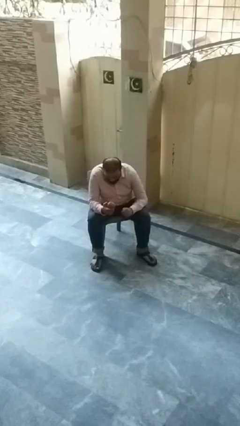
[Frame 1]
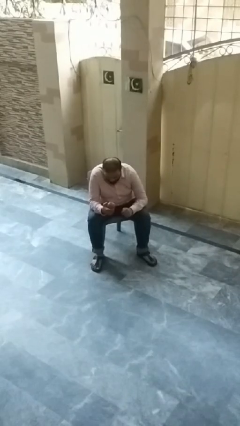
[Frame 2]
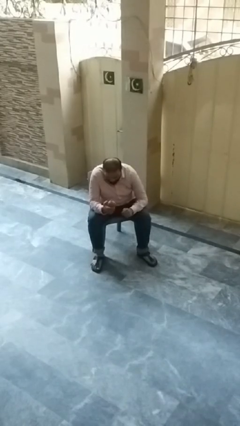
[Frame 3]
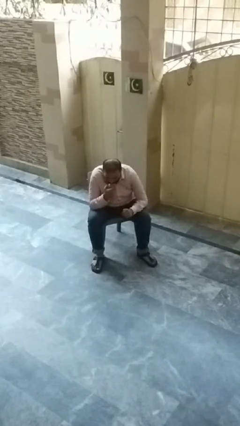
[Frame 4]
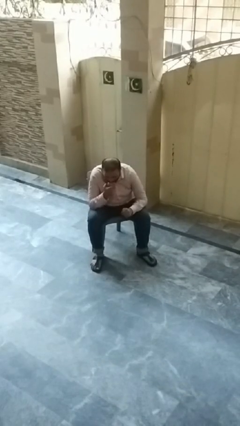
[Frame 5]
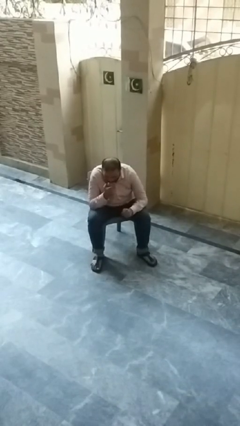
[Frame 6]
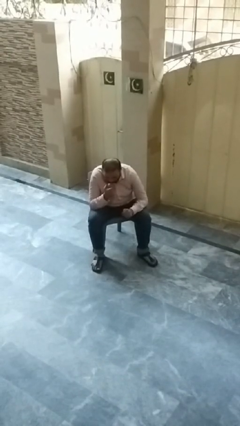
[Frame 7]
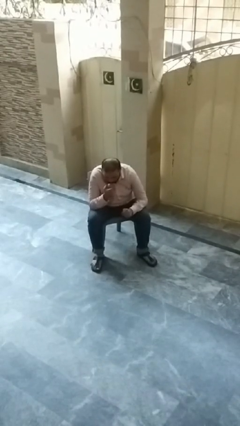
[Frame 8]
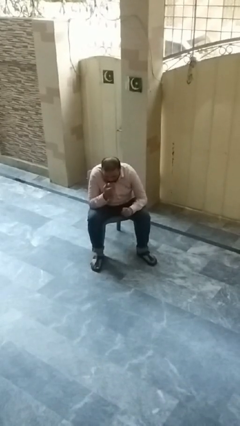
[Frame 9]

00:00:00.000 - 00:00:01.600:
person eats apple

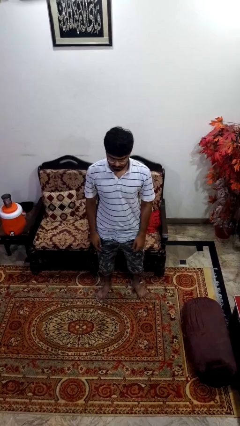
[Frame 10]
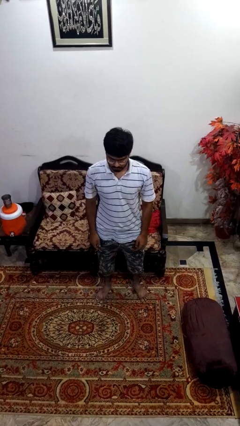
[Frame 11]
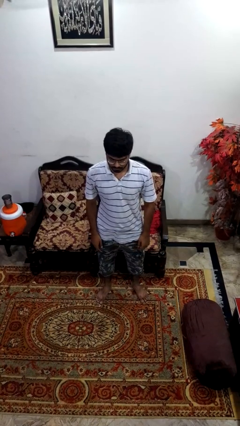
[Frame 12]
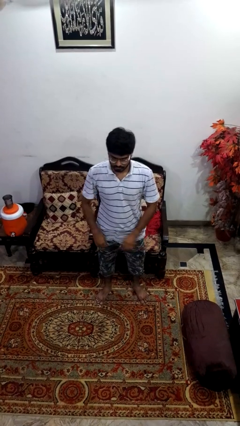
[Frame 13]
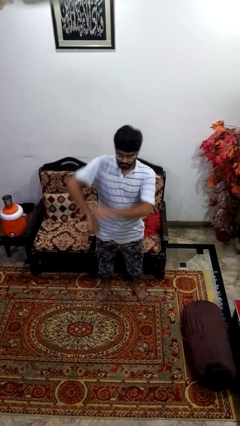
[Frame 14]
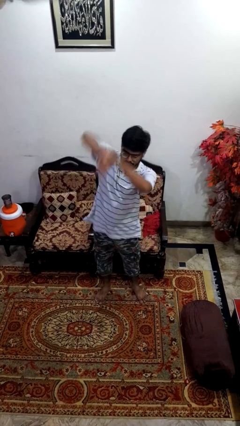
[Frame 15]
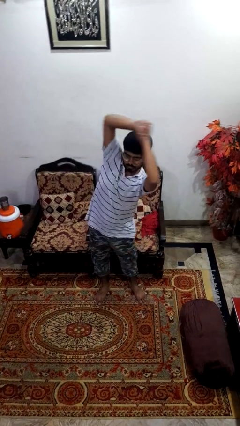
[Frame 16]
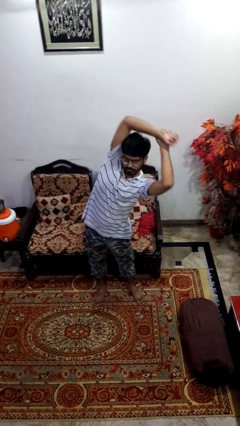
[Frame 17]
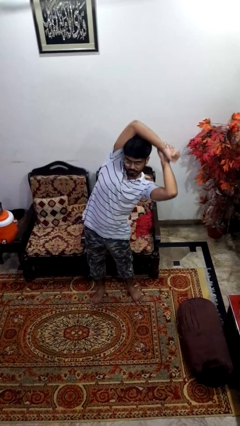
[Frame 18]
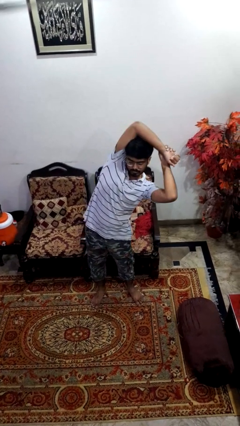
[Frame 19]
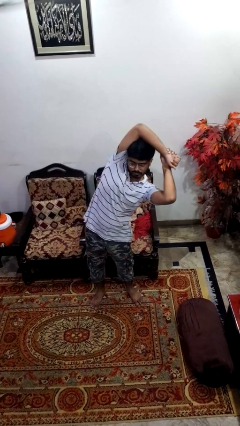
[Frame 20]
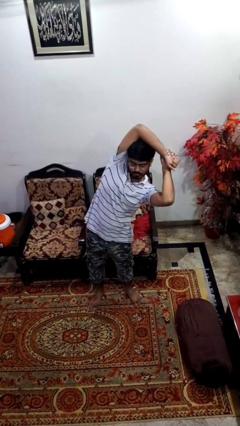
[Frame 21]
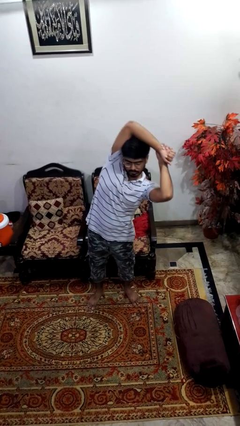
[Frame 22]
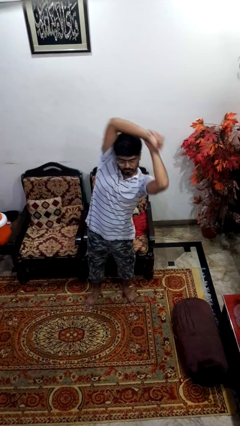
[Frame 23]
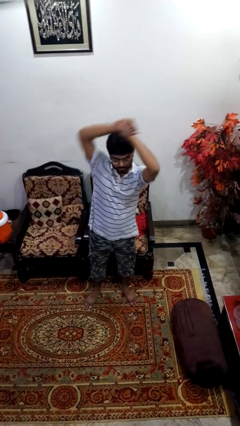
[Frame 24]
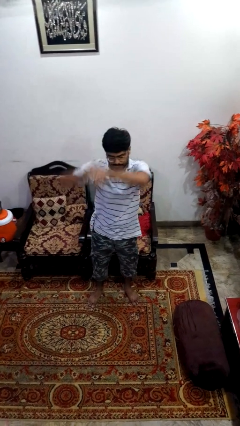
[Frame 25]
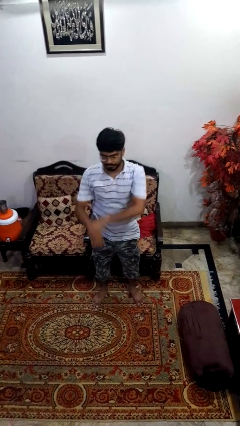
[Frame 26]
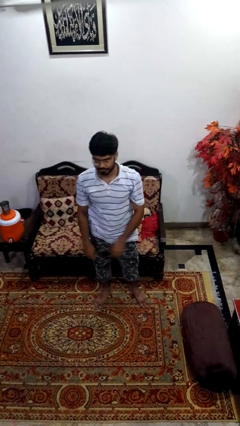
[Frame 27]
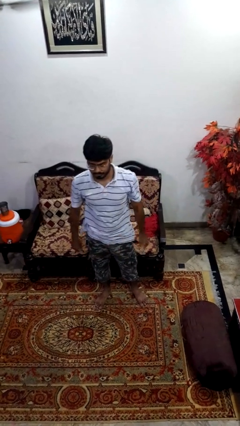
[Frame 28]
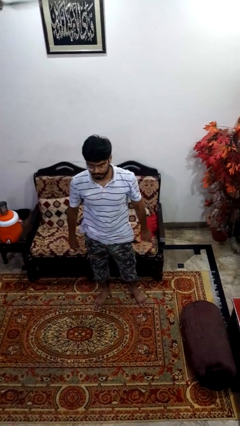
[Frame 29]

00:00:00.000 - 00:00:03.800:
person stretches arms to side

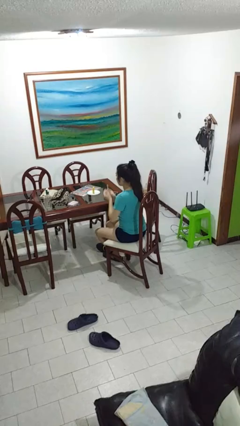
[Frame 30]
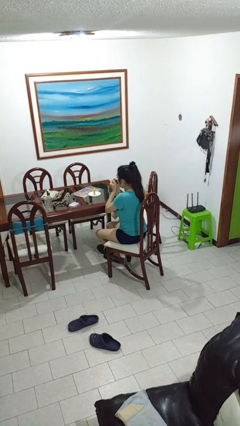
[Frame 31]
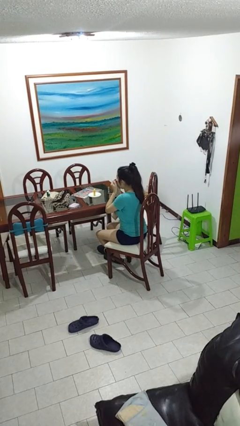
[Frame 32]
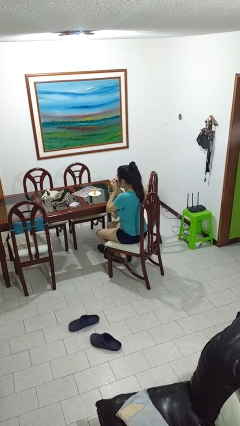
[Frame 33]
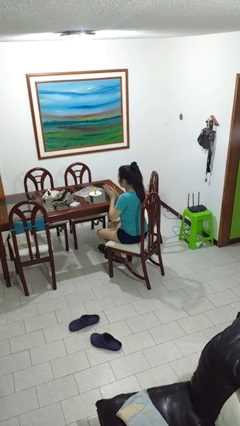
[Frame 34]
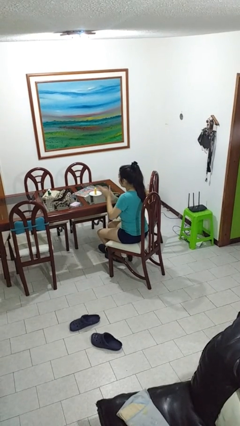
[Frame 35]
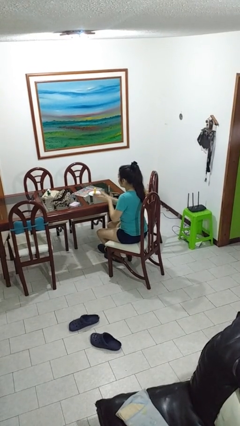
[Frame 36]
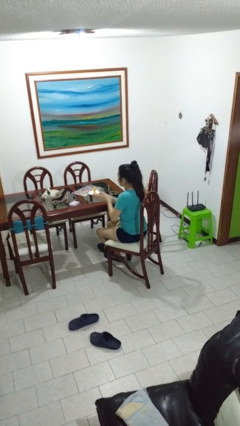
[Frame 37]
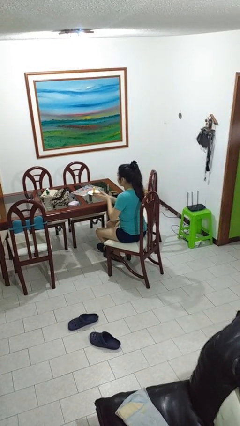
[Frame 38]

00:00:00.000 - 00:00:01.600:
person blows into hands

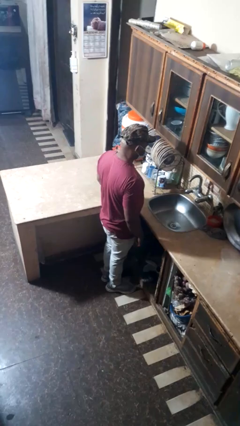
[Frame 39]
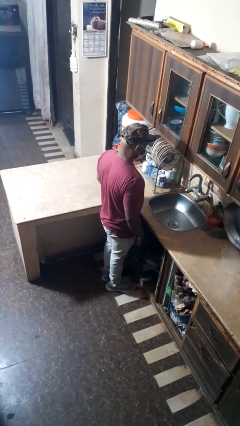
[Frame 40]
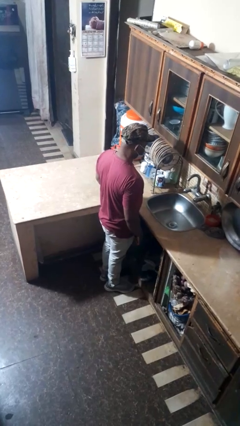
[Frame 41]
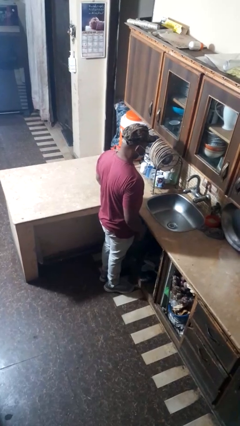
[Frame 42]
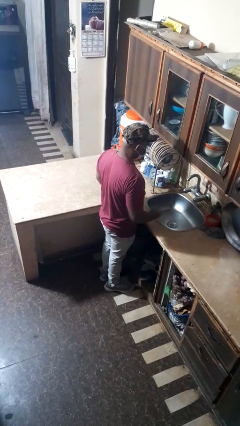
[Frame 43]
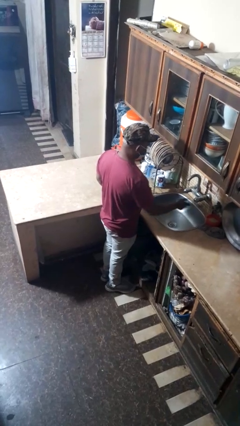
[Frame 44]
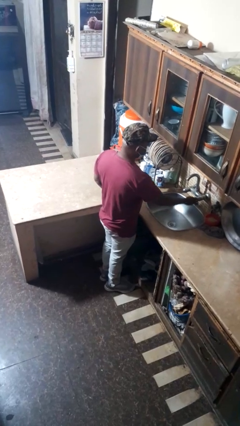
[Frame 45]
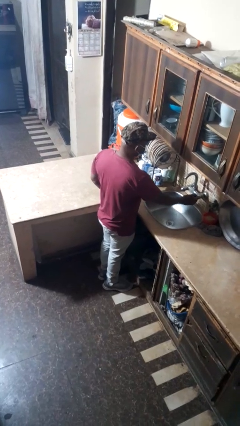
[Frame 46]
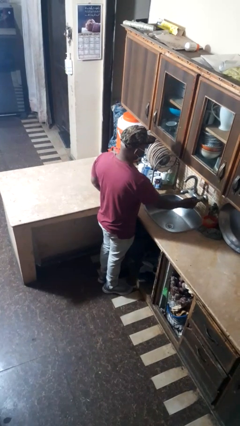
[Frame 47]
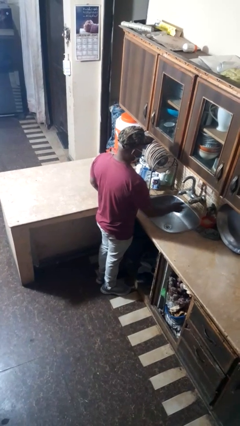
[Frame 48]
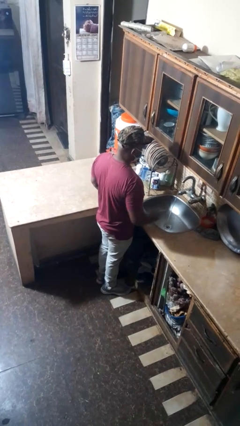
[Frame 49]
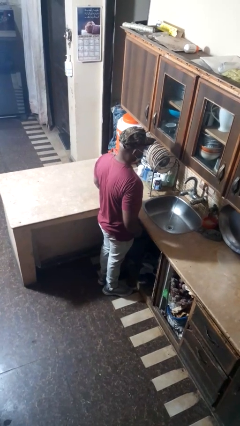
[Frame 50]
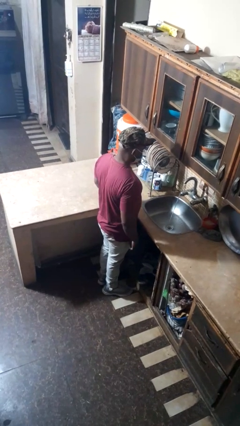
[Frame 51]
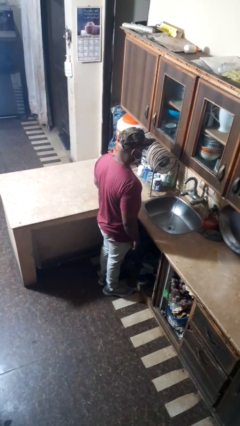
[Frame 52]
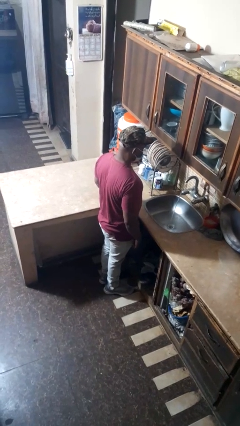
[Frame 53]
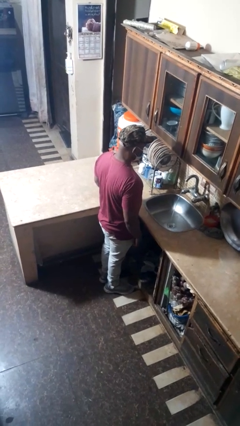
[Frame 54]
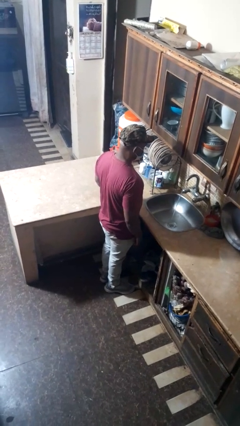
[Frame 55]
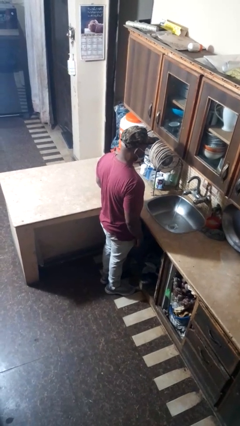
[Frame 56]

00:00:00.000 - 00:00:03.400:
person turns on faucet

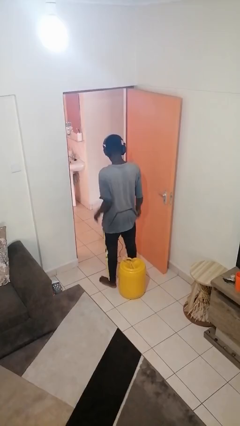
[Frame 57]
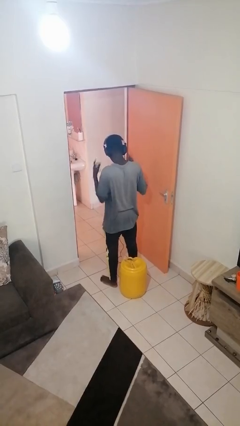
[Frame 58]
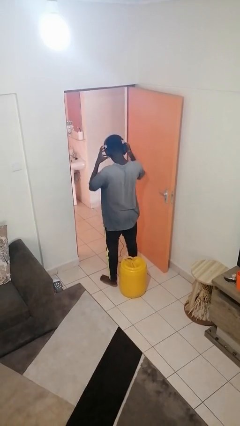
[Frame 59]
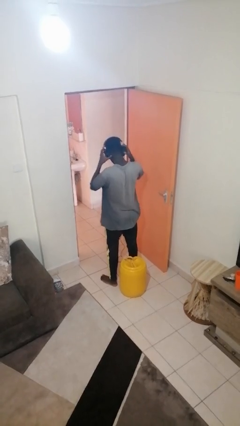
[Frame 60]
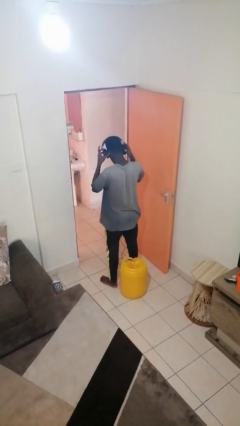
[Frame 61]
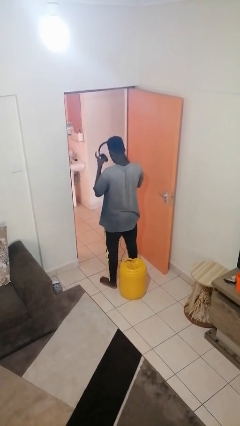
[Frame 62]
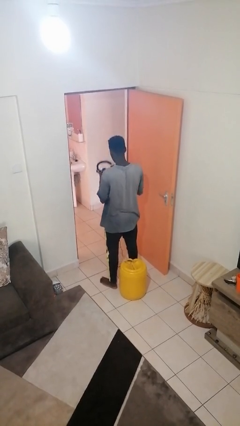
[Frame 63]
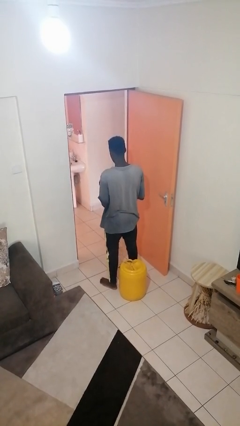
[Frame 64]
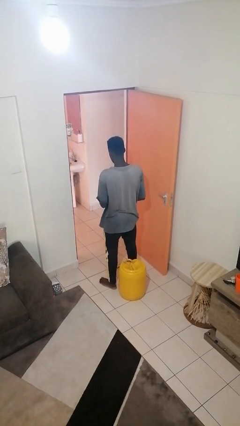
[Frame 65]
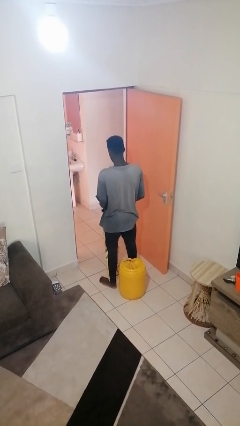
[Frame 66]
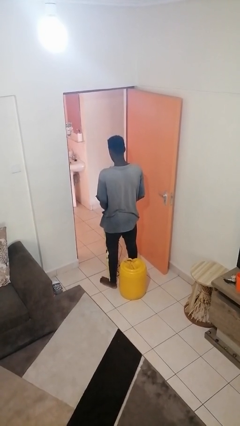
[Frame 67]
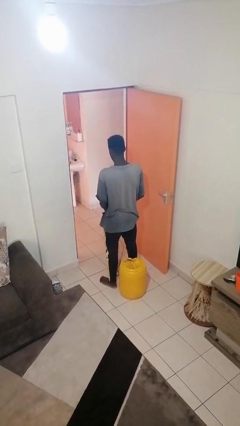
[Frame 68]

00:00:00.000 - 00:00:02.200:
person takes off headphones

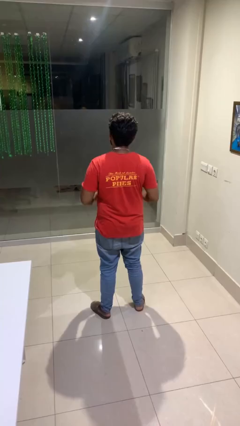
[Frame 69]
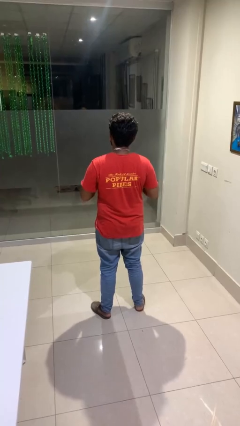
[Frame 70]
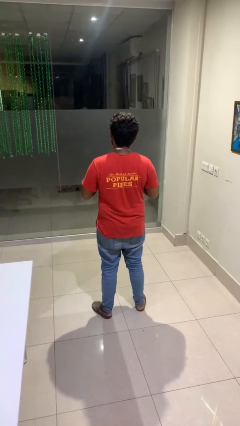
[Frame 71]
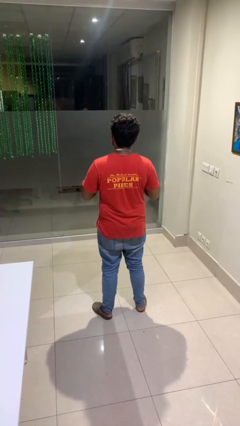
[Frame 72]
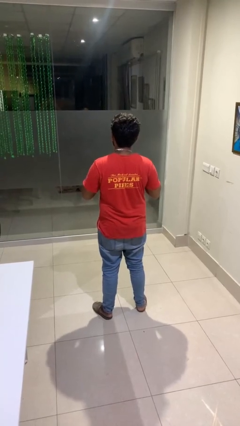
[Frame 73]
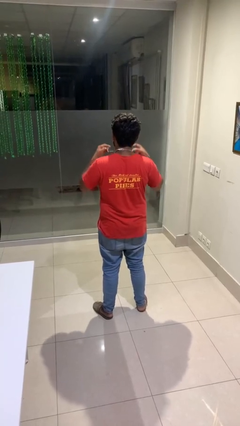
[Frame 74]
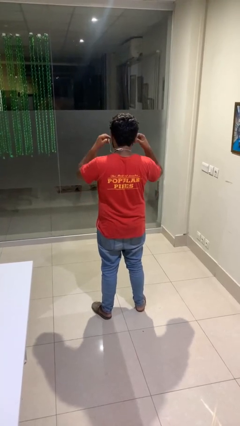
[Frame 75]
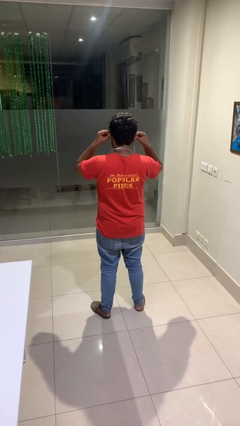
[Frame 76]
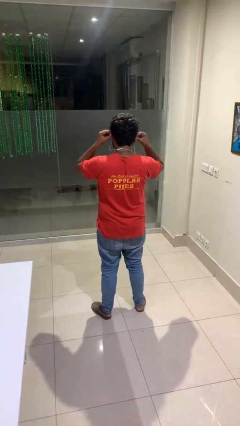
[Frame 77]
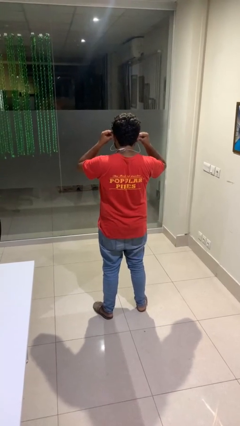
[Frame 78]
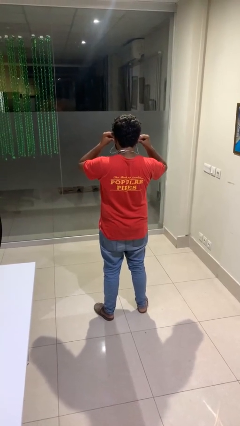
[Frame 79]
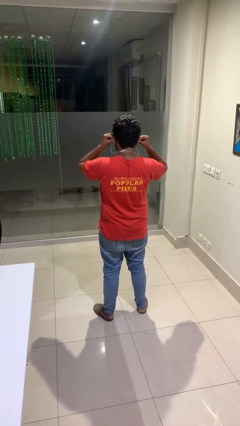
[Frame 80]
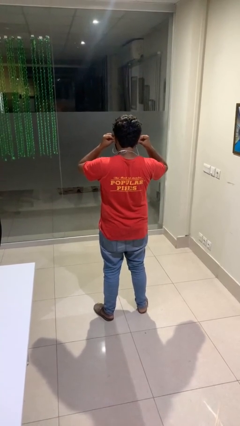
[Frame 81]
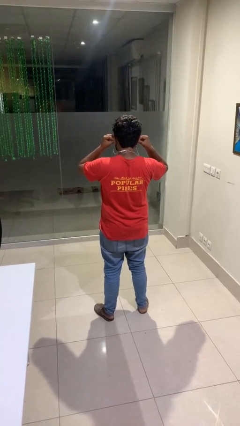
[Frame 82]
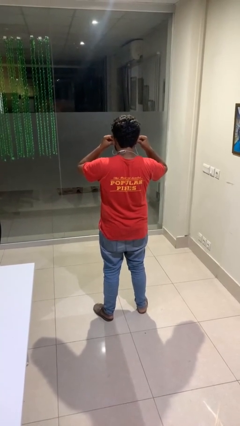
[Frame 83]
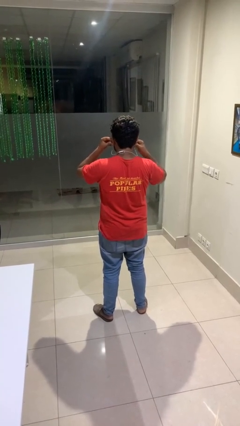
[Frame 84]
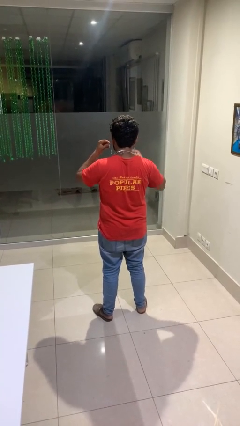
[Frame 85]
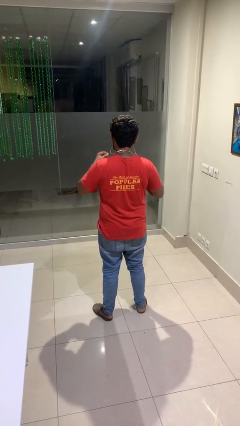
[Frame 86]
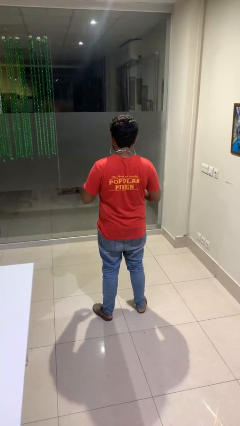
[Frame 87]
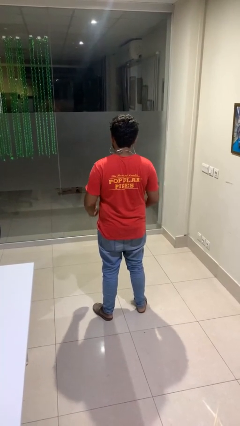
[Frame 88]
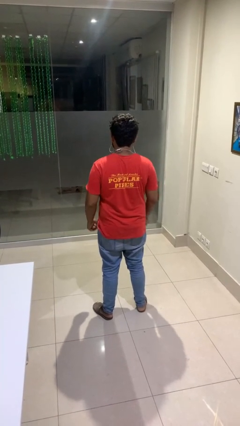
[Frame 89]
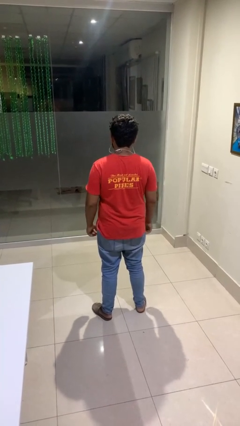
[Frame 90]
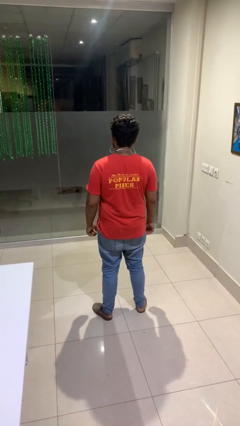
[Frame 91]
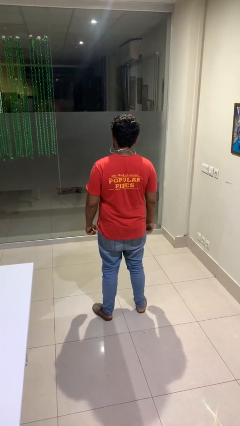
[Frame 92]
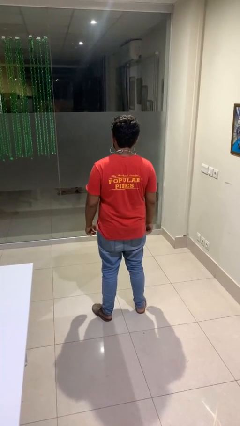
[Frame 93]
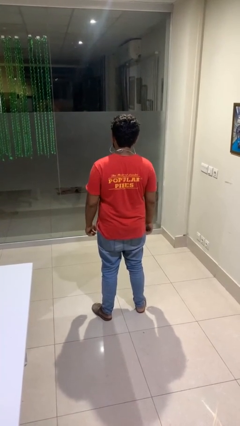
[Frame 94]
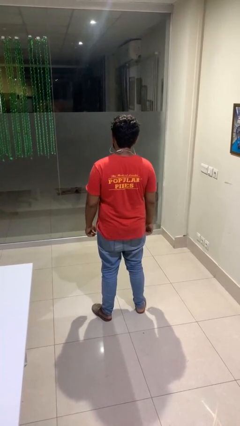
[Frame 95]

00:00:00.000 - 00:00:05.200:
person puts on headphones
